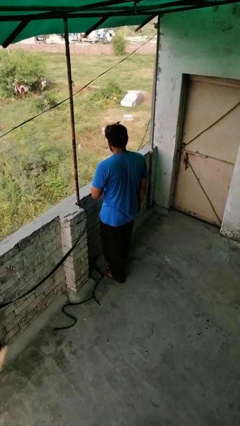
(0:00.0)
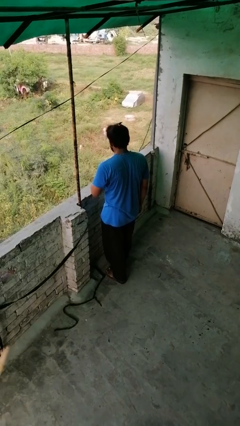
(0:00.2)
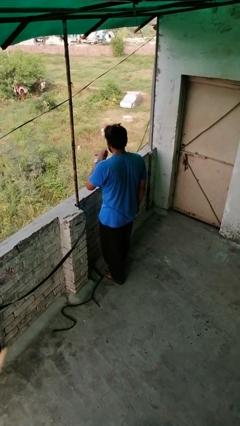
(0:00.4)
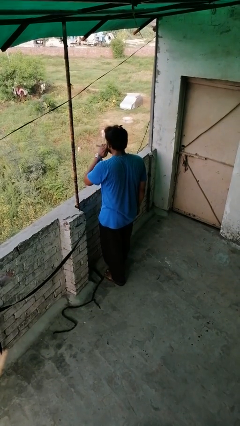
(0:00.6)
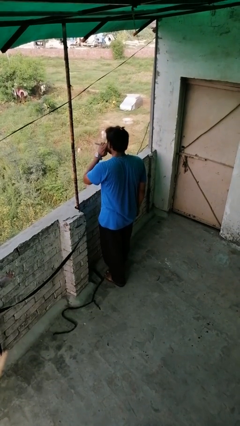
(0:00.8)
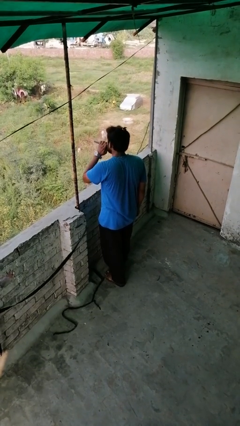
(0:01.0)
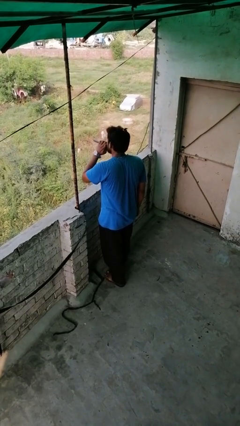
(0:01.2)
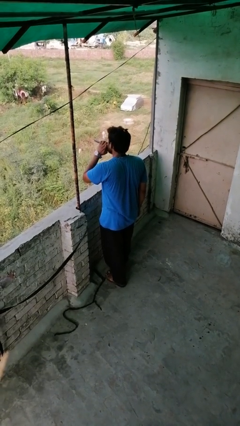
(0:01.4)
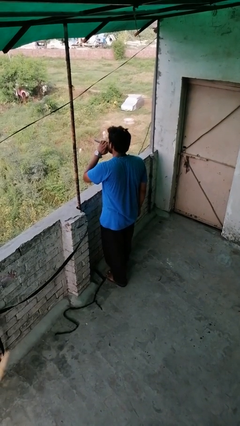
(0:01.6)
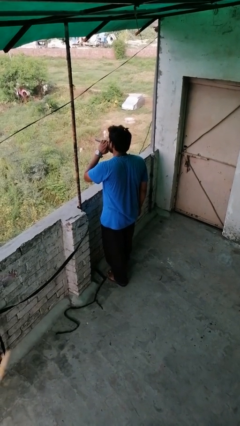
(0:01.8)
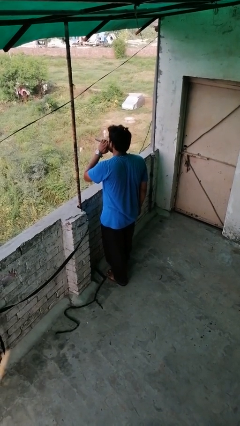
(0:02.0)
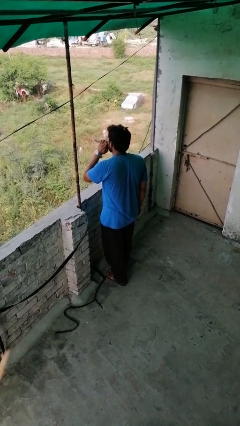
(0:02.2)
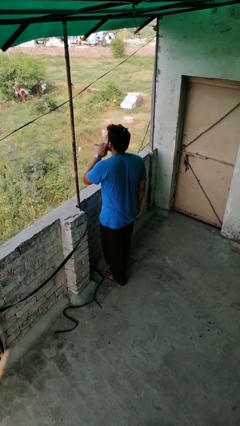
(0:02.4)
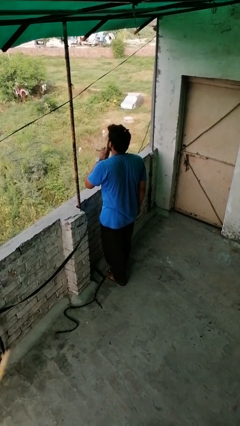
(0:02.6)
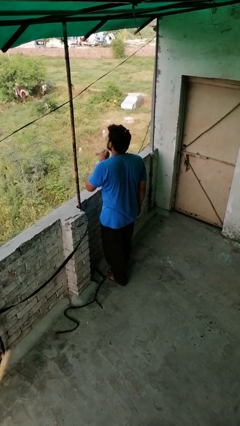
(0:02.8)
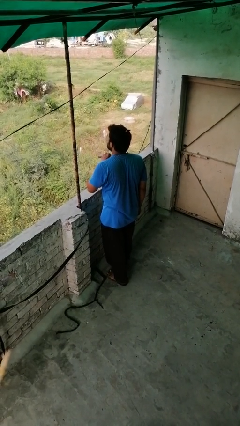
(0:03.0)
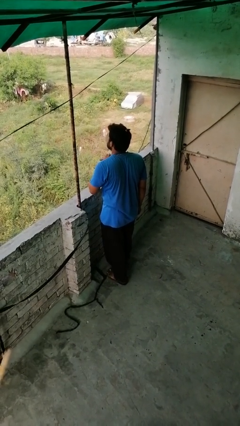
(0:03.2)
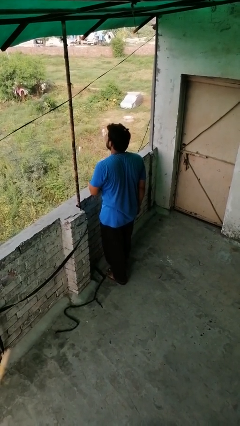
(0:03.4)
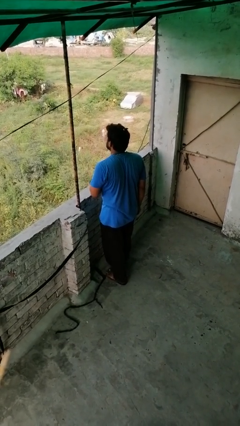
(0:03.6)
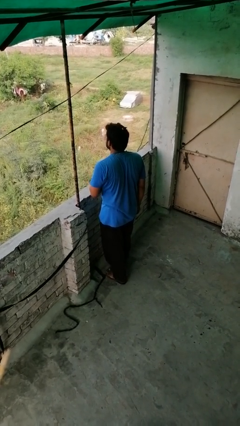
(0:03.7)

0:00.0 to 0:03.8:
person vapes

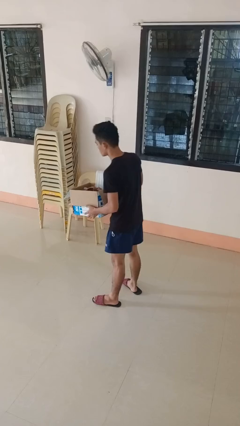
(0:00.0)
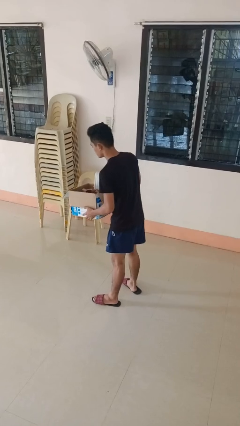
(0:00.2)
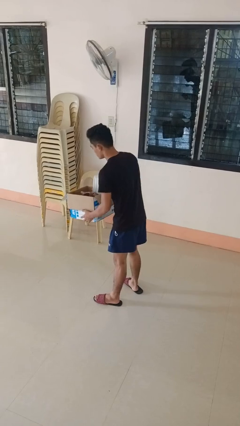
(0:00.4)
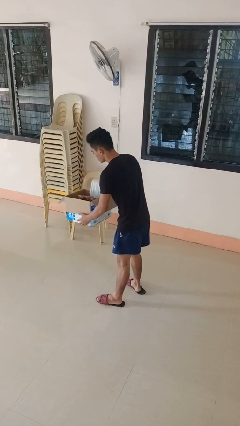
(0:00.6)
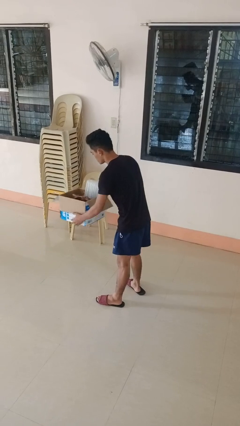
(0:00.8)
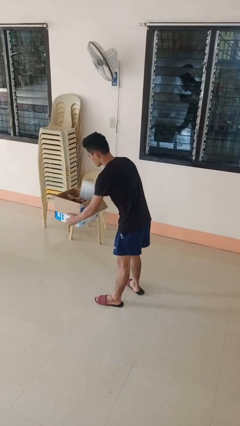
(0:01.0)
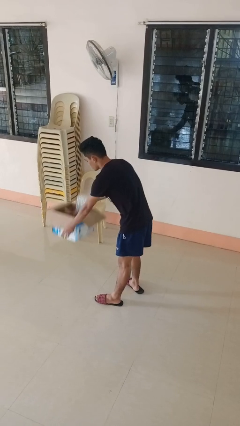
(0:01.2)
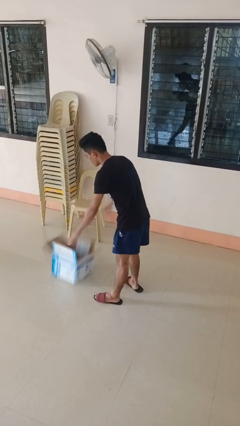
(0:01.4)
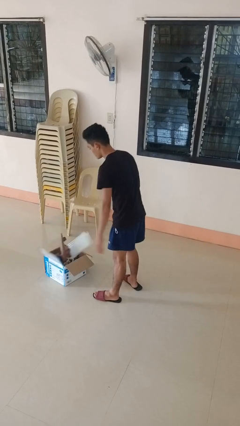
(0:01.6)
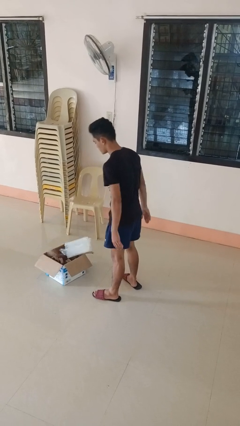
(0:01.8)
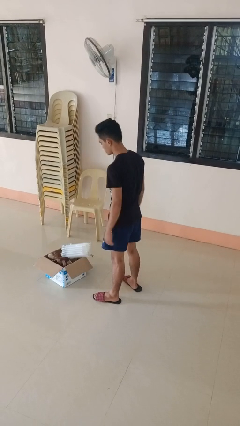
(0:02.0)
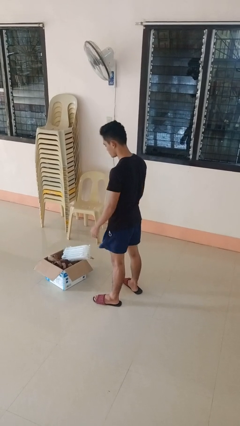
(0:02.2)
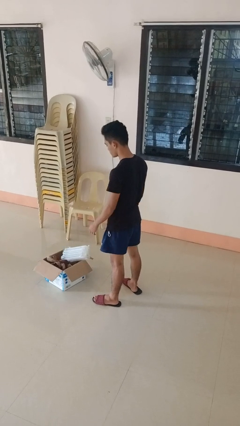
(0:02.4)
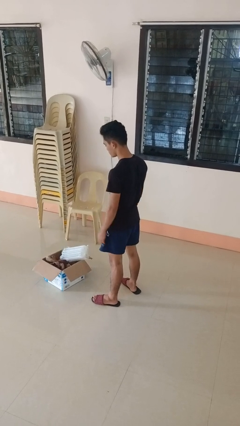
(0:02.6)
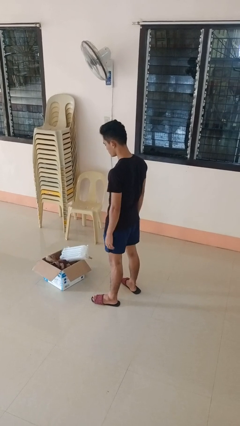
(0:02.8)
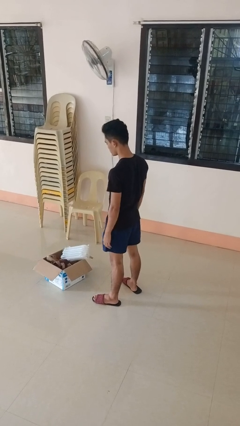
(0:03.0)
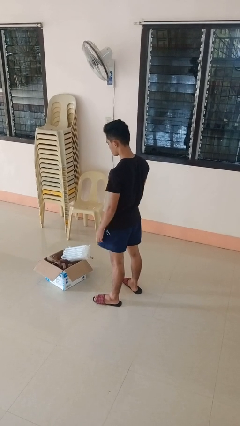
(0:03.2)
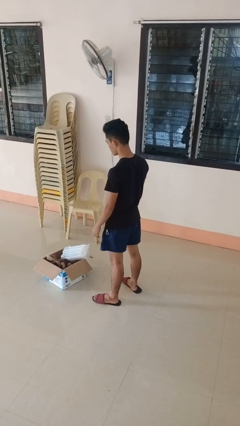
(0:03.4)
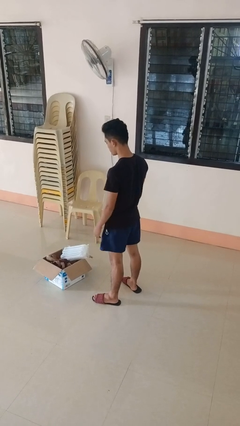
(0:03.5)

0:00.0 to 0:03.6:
person unloads box onto floor

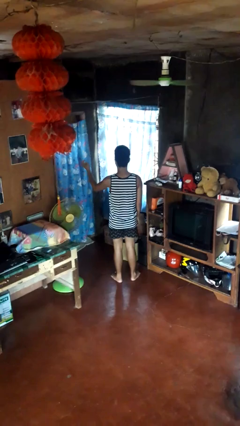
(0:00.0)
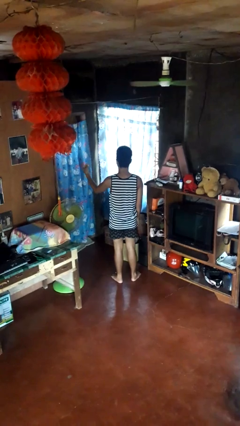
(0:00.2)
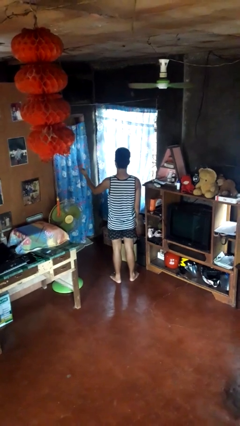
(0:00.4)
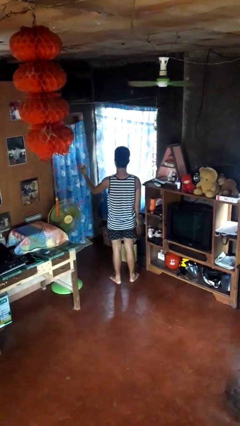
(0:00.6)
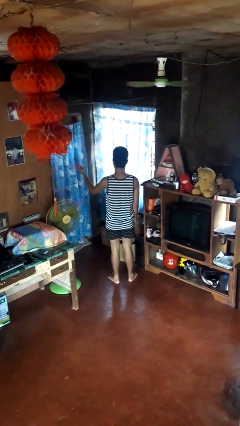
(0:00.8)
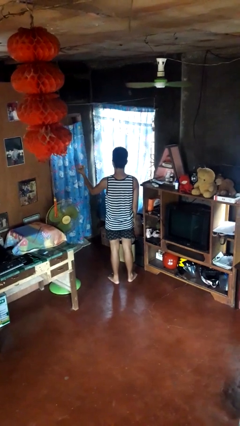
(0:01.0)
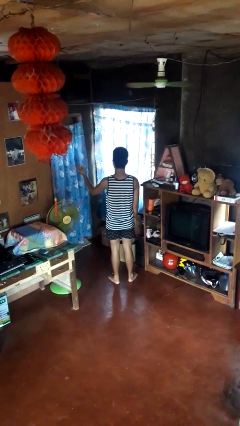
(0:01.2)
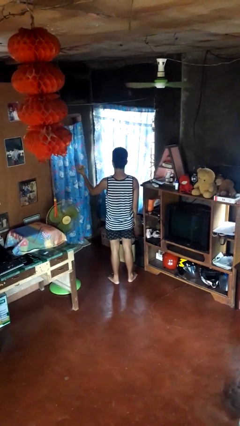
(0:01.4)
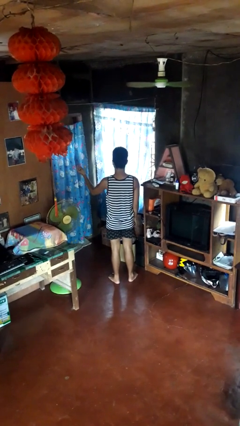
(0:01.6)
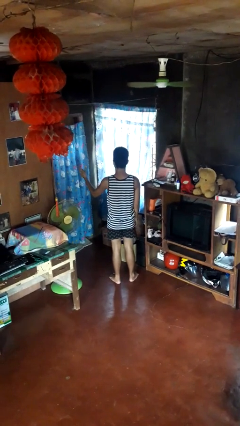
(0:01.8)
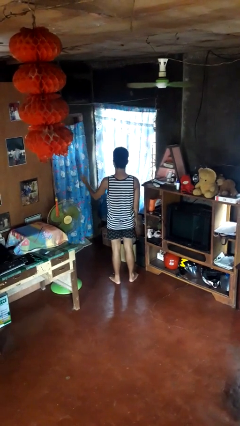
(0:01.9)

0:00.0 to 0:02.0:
person snaps fingers

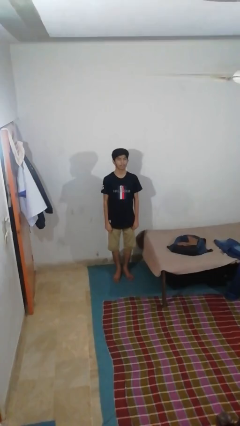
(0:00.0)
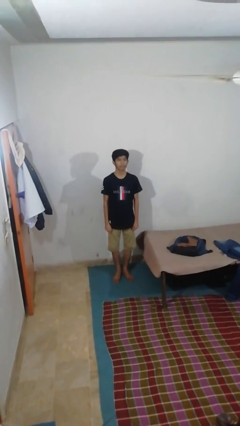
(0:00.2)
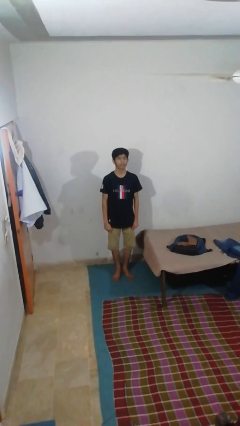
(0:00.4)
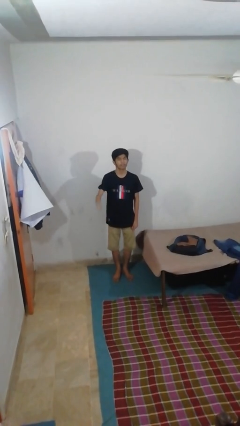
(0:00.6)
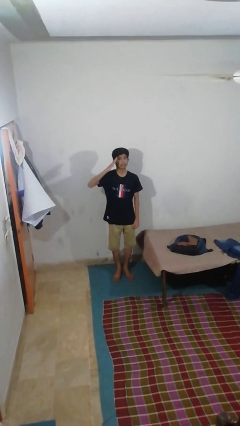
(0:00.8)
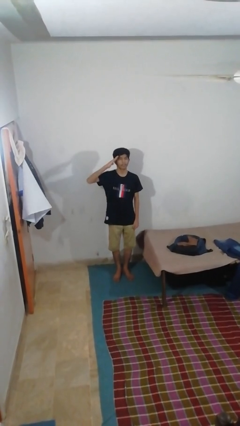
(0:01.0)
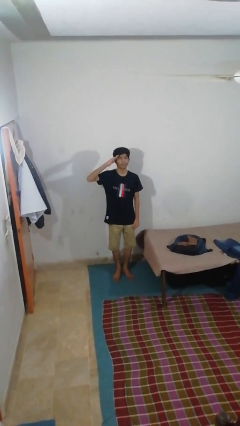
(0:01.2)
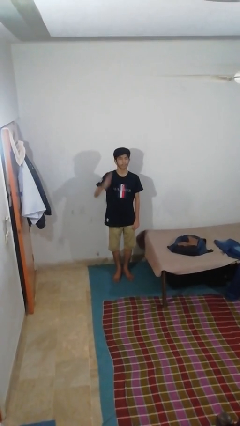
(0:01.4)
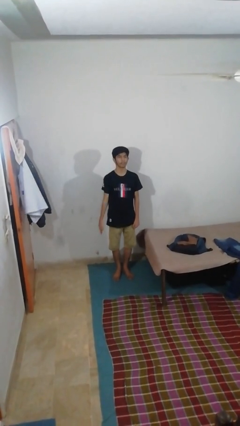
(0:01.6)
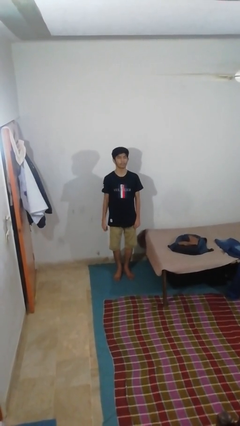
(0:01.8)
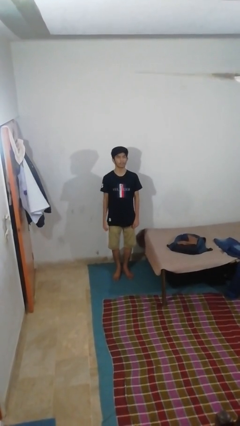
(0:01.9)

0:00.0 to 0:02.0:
person salutes

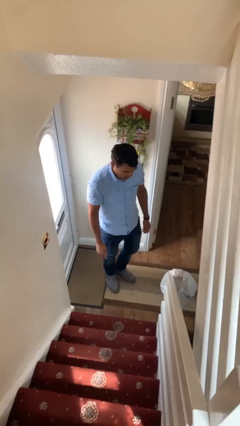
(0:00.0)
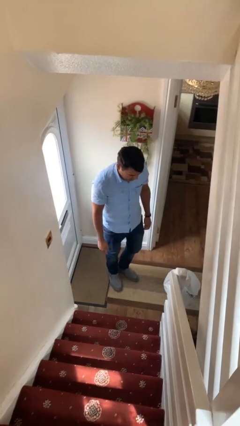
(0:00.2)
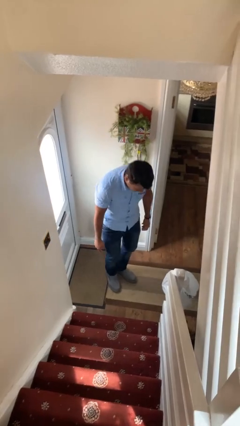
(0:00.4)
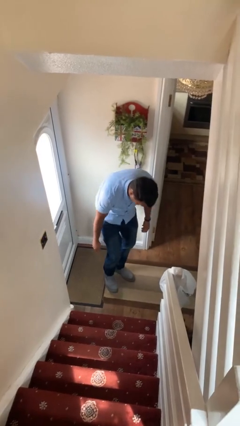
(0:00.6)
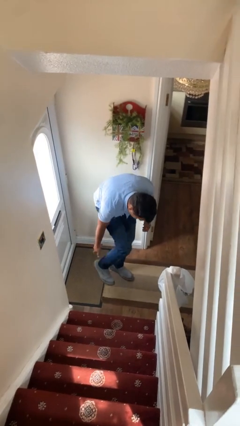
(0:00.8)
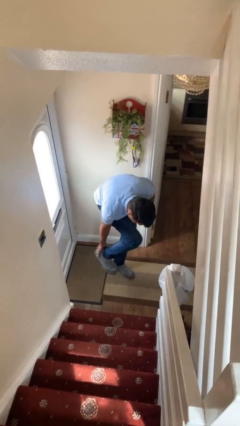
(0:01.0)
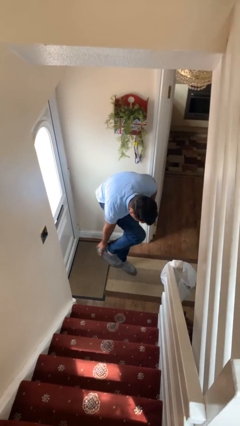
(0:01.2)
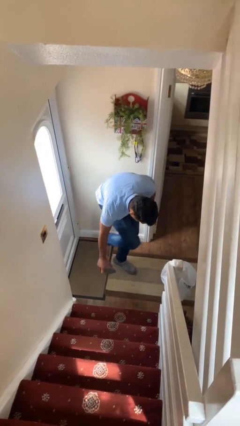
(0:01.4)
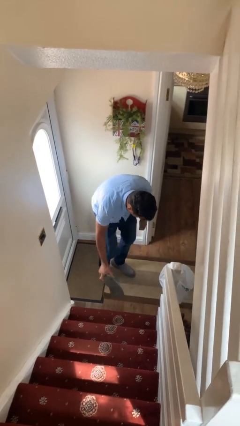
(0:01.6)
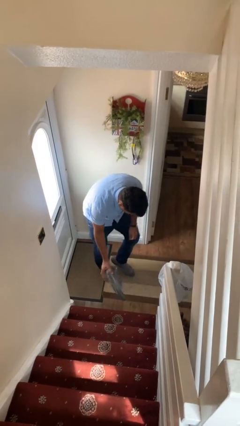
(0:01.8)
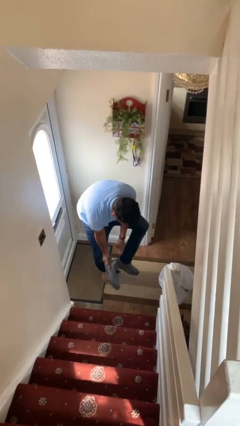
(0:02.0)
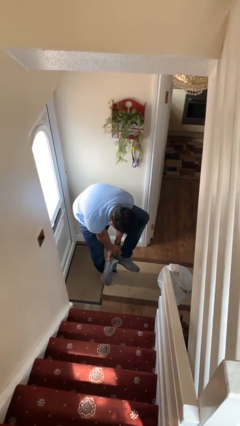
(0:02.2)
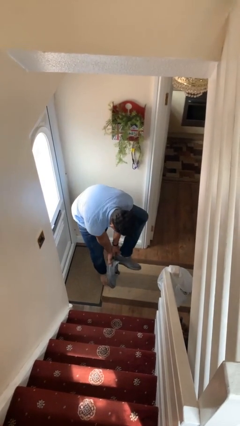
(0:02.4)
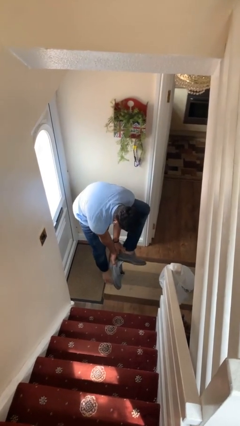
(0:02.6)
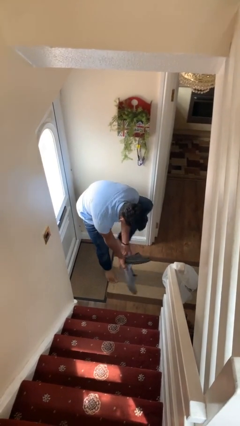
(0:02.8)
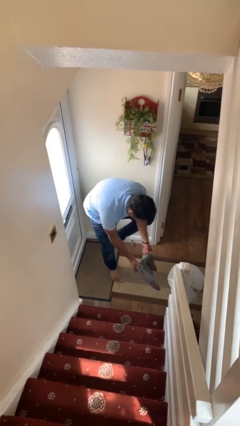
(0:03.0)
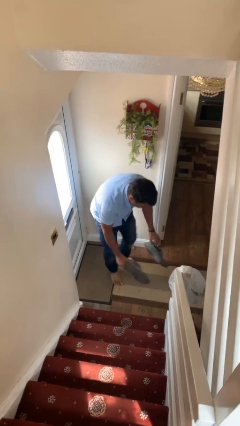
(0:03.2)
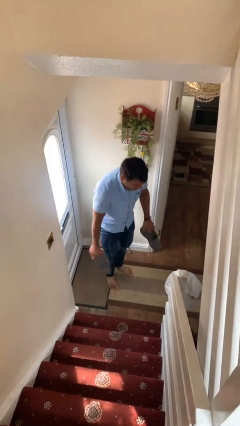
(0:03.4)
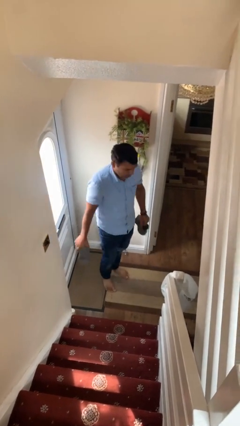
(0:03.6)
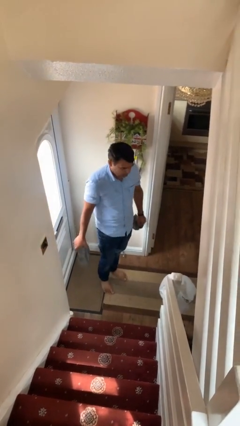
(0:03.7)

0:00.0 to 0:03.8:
person takes off shoes

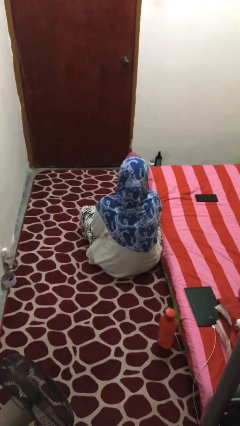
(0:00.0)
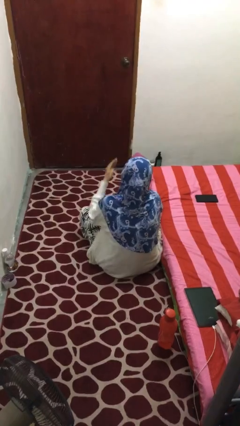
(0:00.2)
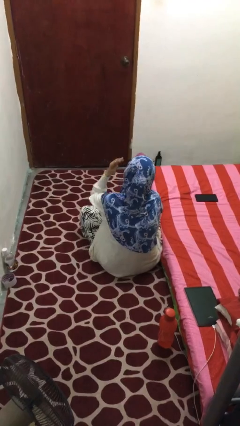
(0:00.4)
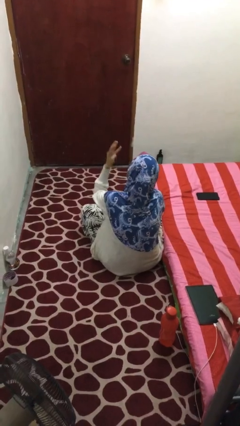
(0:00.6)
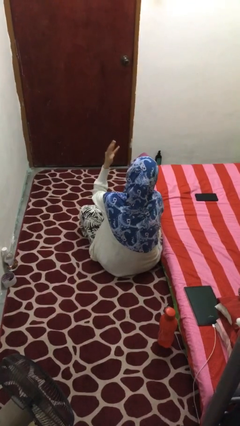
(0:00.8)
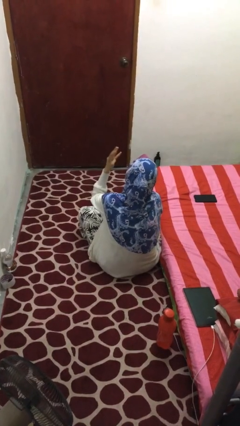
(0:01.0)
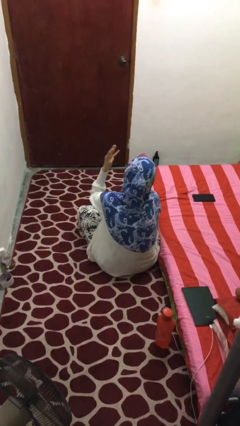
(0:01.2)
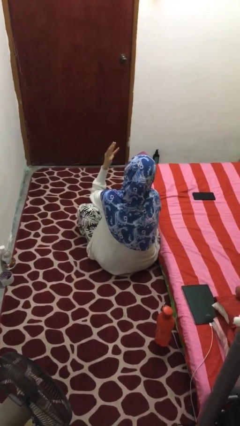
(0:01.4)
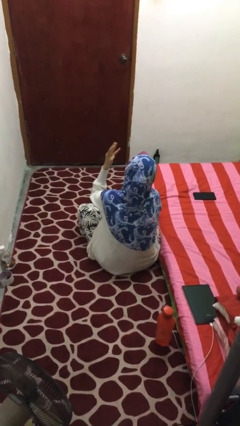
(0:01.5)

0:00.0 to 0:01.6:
person gestures number four

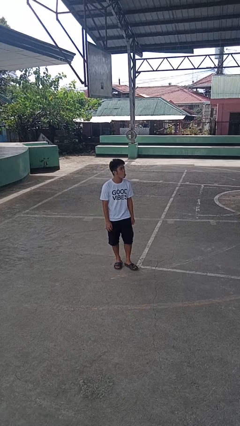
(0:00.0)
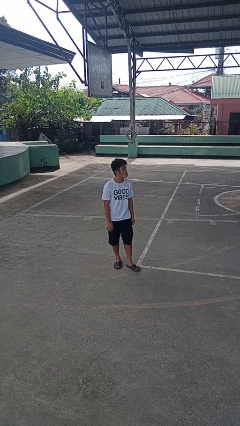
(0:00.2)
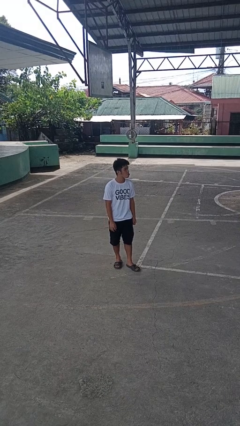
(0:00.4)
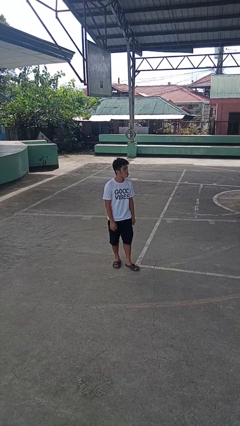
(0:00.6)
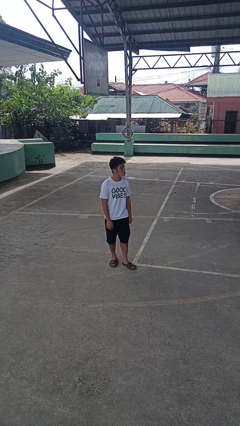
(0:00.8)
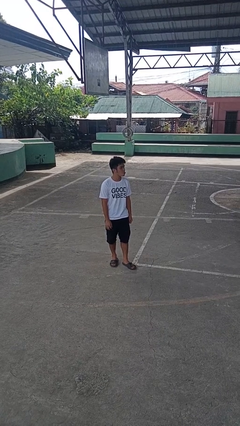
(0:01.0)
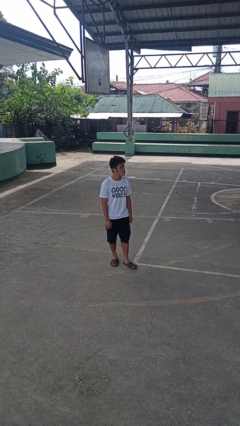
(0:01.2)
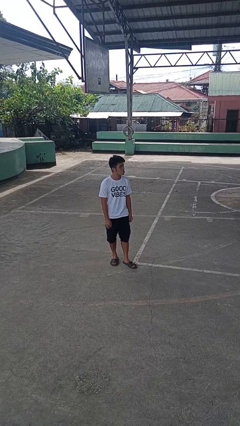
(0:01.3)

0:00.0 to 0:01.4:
person sticks out tongue
